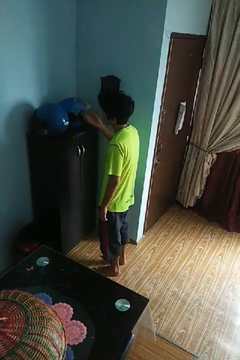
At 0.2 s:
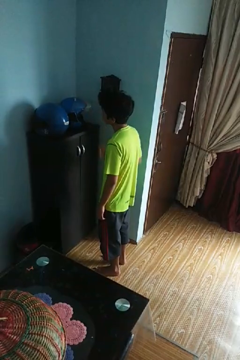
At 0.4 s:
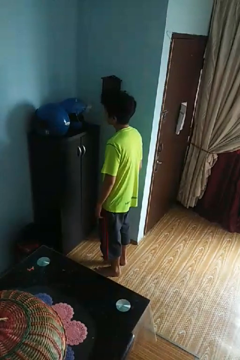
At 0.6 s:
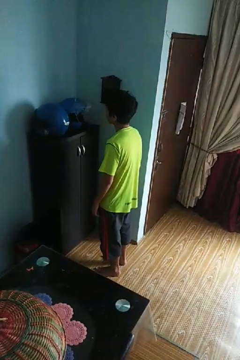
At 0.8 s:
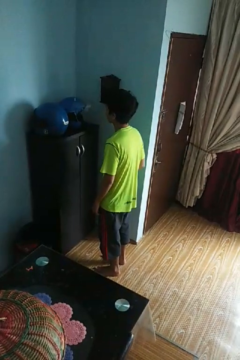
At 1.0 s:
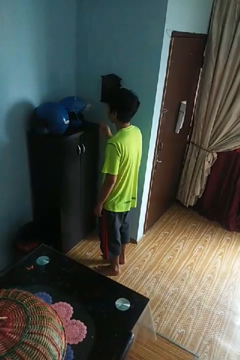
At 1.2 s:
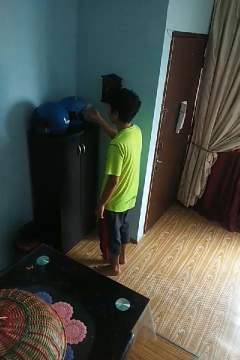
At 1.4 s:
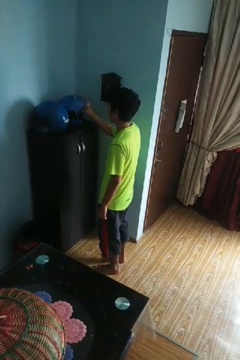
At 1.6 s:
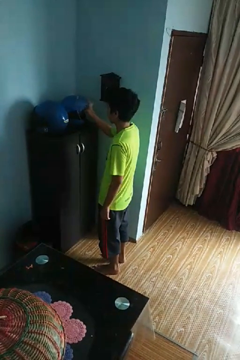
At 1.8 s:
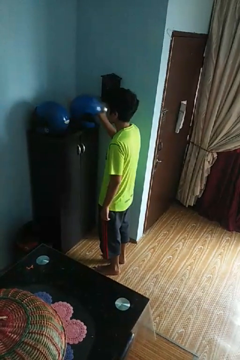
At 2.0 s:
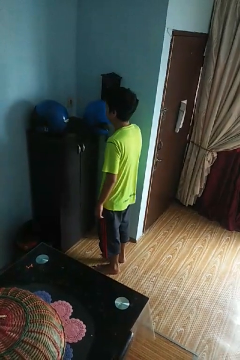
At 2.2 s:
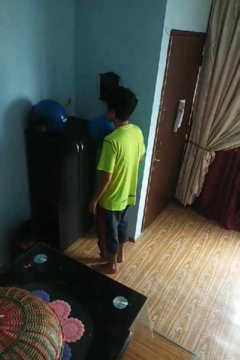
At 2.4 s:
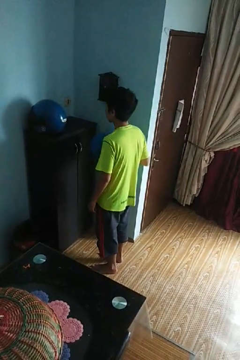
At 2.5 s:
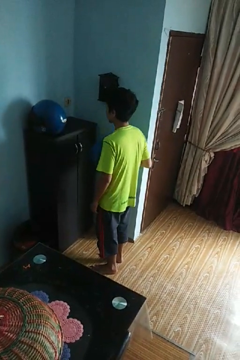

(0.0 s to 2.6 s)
person picks up object from countertop

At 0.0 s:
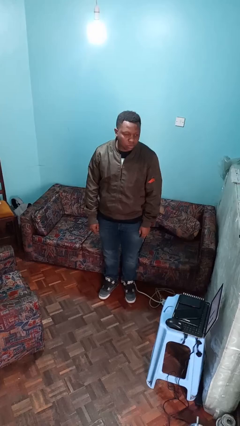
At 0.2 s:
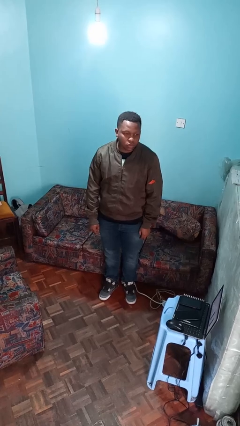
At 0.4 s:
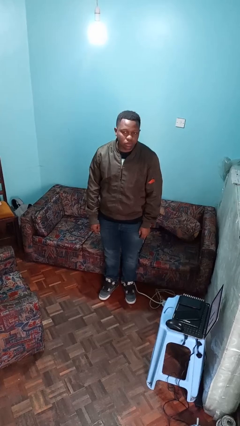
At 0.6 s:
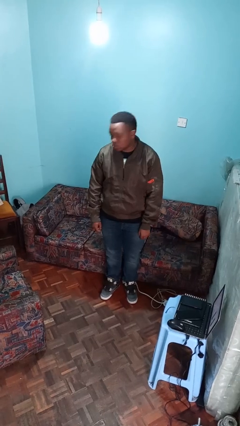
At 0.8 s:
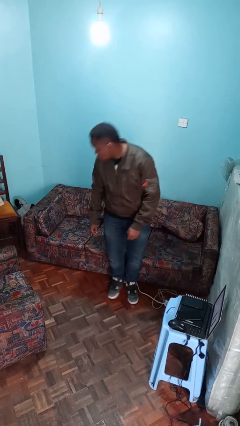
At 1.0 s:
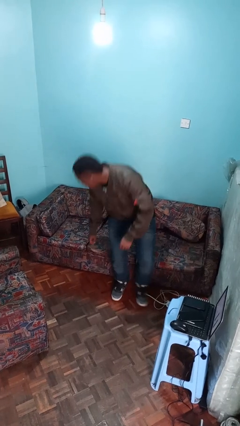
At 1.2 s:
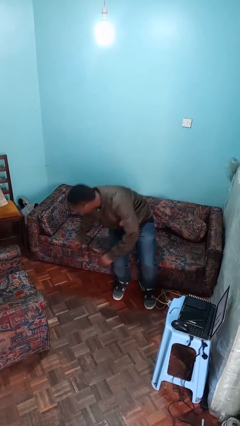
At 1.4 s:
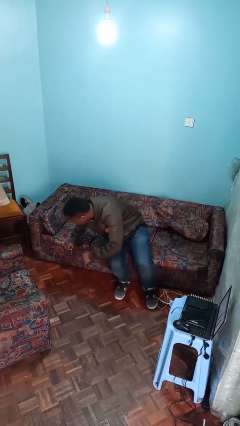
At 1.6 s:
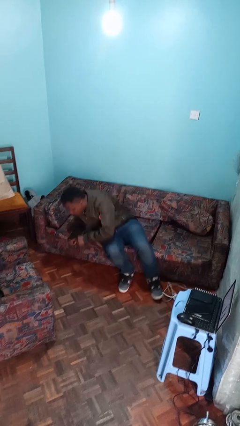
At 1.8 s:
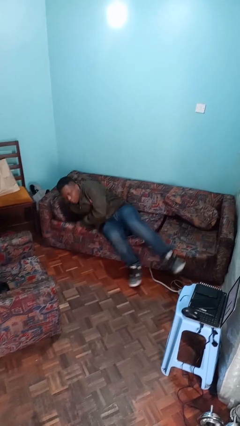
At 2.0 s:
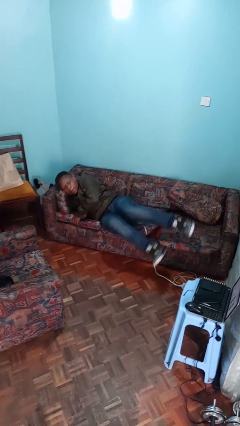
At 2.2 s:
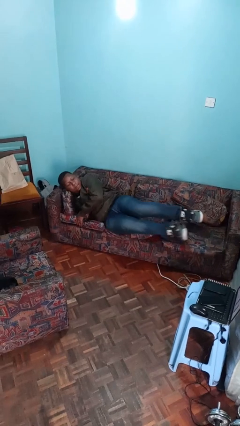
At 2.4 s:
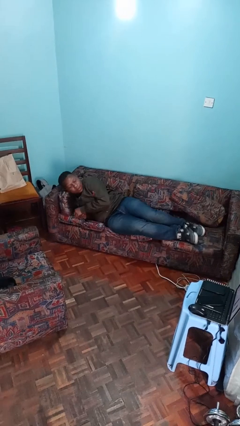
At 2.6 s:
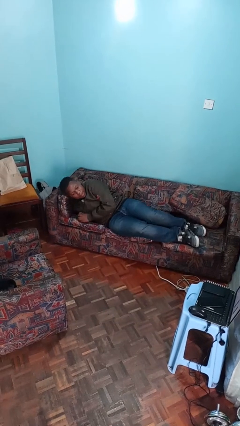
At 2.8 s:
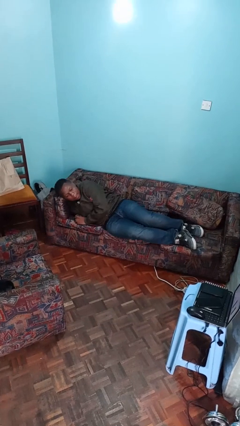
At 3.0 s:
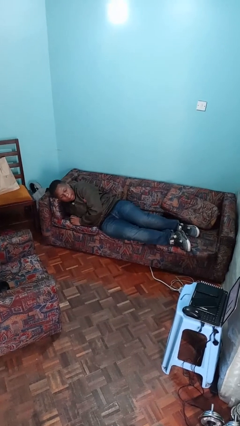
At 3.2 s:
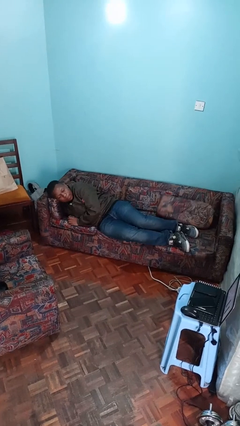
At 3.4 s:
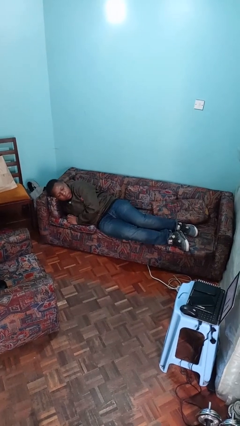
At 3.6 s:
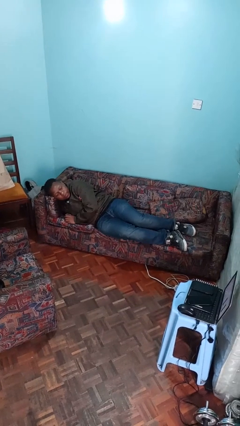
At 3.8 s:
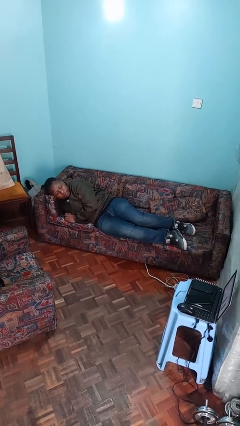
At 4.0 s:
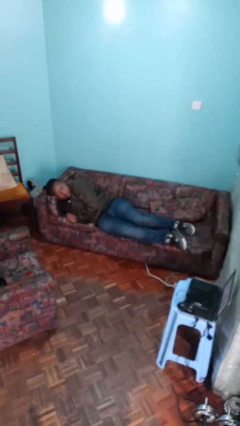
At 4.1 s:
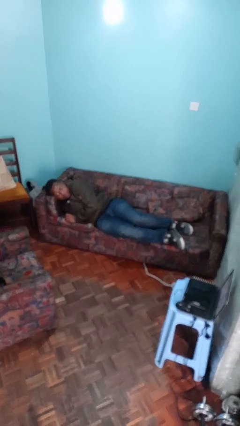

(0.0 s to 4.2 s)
person lies down on couch

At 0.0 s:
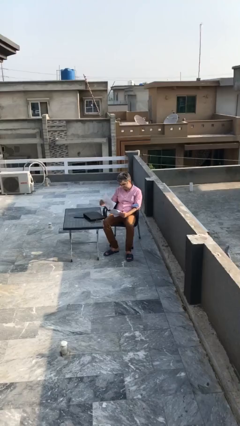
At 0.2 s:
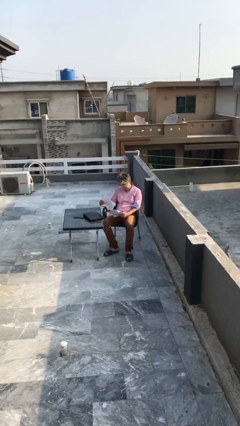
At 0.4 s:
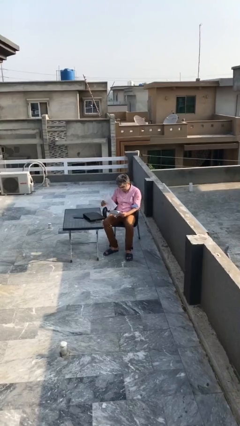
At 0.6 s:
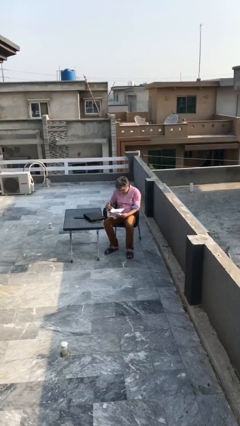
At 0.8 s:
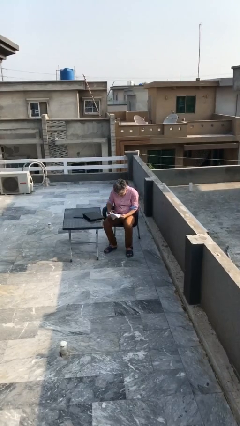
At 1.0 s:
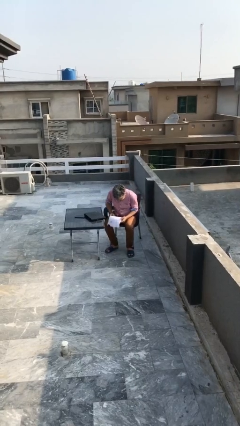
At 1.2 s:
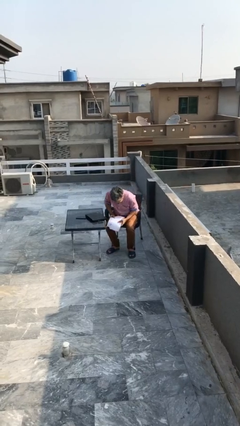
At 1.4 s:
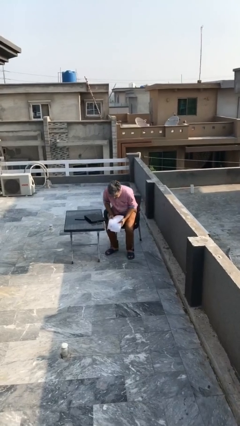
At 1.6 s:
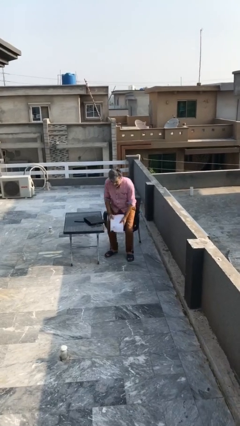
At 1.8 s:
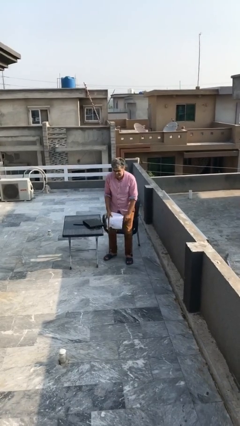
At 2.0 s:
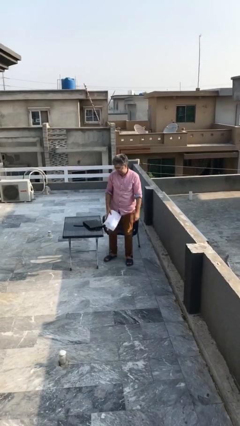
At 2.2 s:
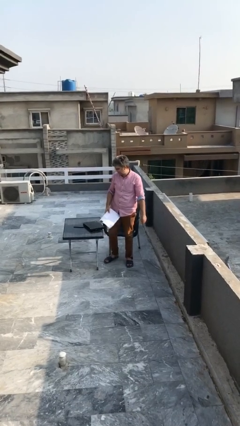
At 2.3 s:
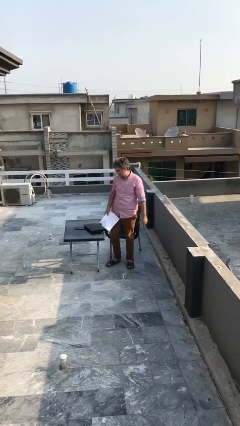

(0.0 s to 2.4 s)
person stands up

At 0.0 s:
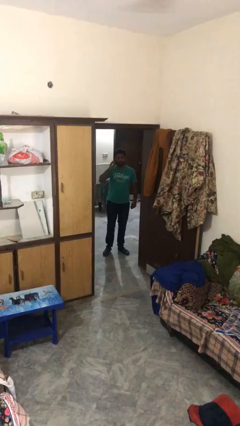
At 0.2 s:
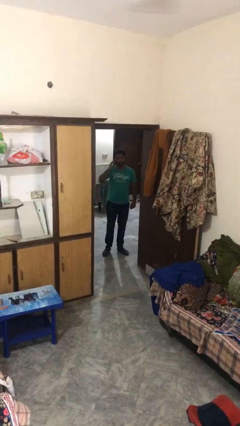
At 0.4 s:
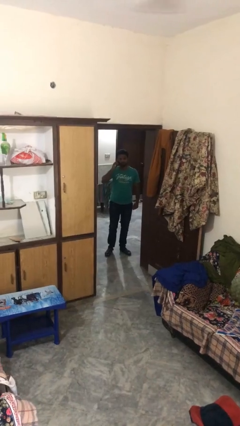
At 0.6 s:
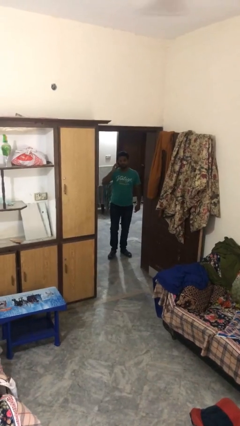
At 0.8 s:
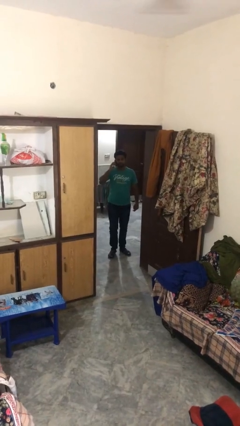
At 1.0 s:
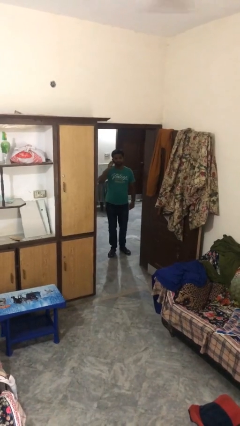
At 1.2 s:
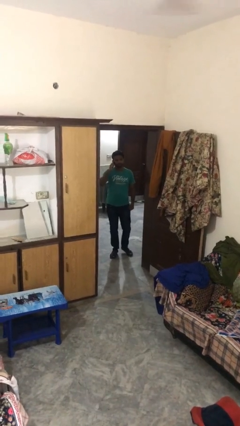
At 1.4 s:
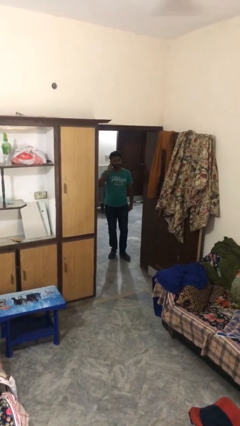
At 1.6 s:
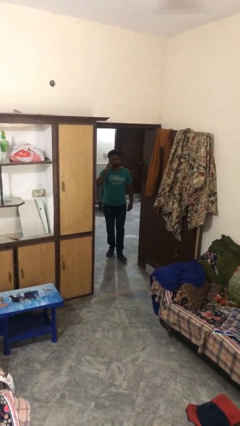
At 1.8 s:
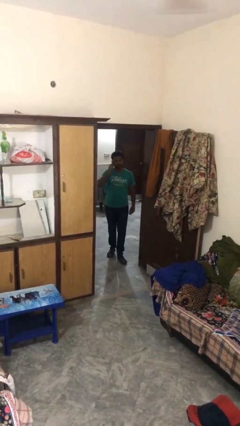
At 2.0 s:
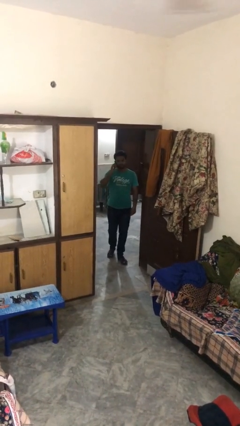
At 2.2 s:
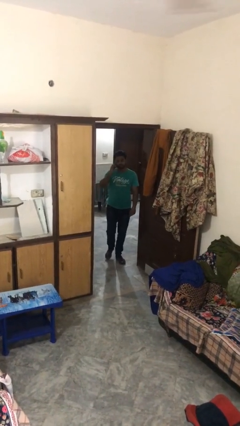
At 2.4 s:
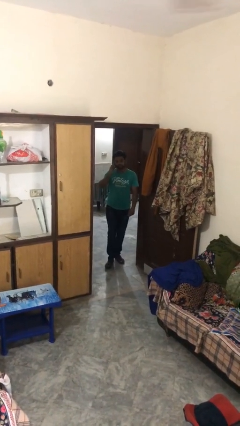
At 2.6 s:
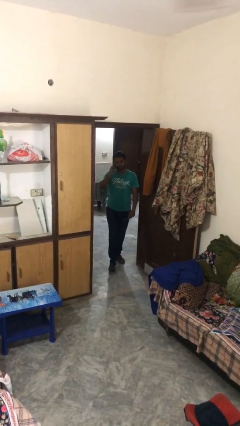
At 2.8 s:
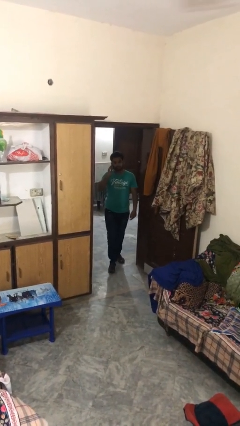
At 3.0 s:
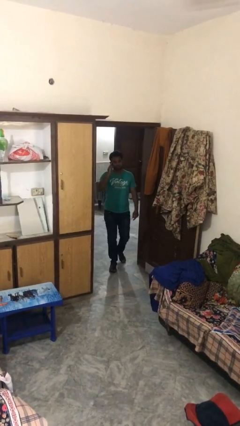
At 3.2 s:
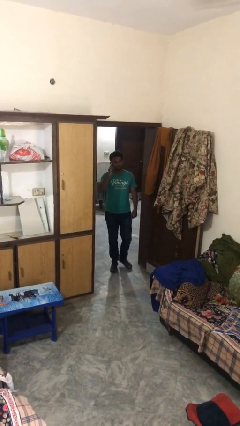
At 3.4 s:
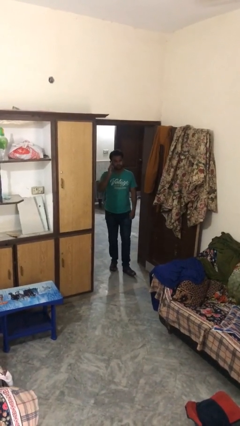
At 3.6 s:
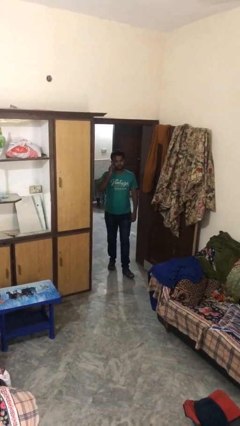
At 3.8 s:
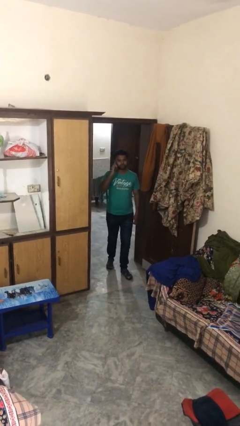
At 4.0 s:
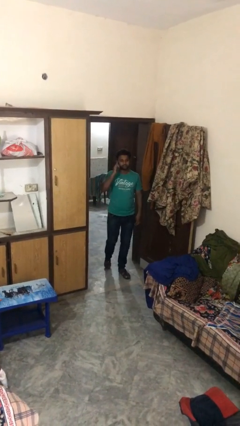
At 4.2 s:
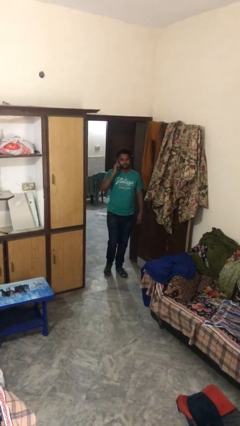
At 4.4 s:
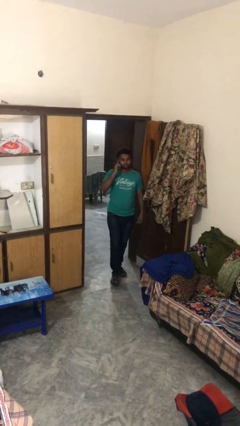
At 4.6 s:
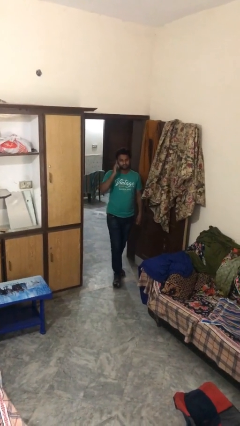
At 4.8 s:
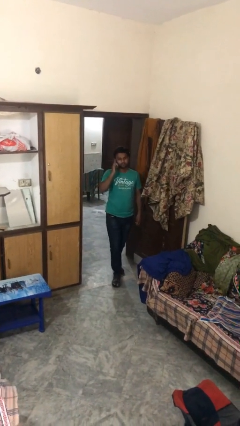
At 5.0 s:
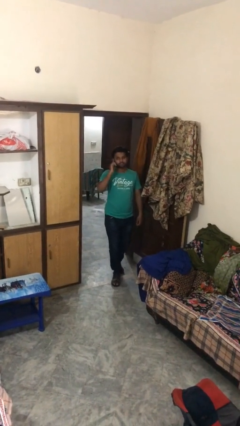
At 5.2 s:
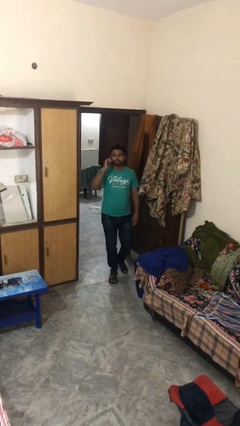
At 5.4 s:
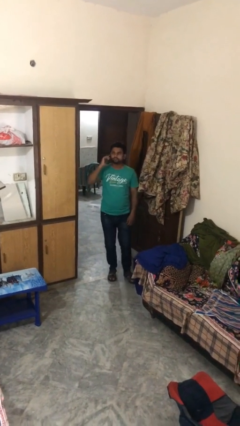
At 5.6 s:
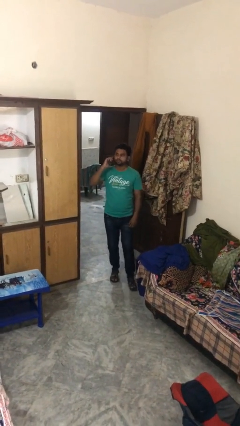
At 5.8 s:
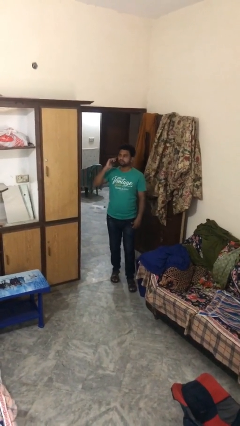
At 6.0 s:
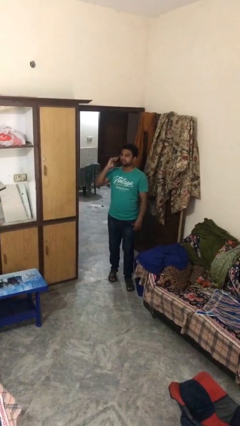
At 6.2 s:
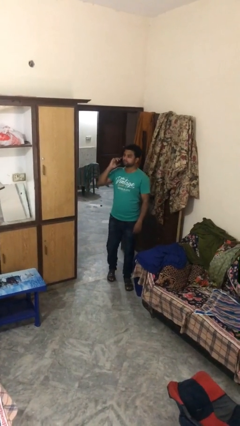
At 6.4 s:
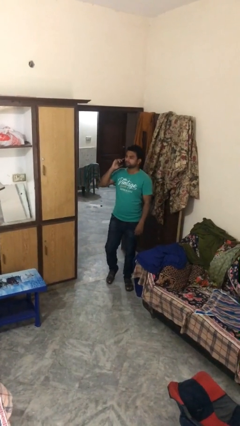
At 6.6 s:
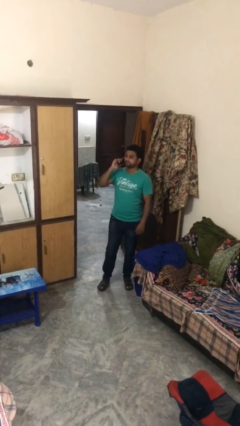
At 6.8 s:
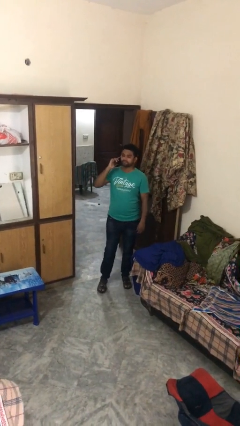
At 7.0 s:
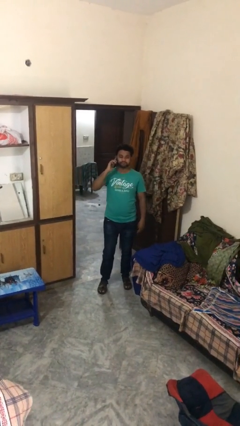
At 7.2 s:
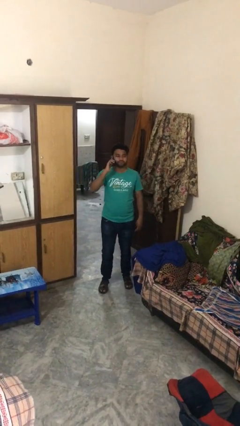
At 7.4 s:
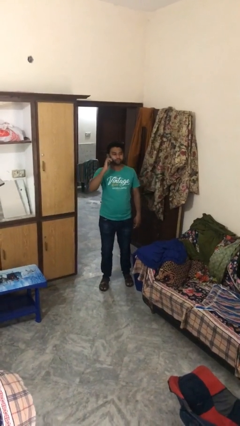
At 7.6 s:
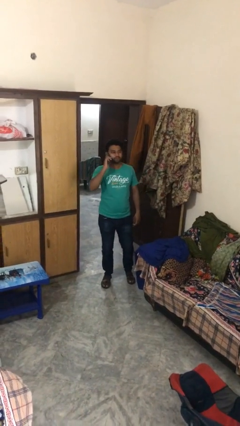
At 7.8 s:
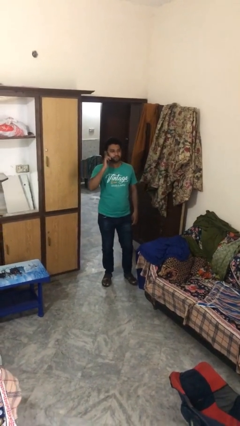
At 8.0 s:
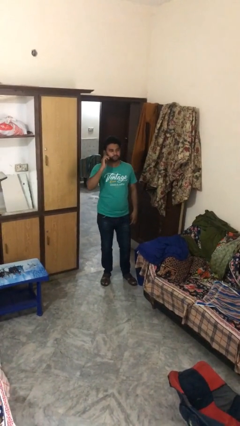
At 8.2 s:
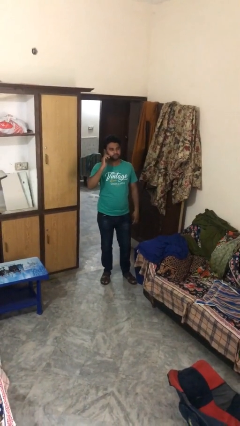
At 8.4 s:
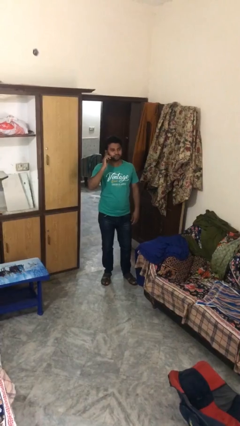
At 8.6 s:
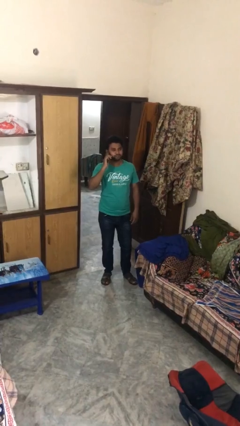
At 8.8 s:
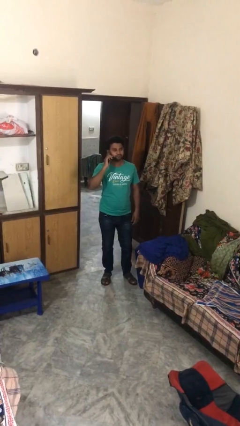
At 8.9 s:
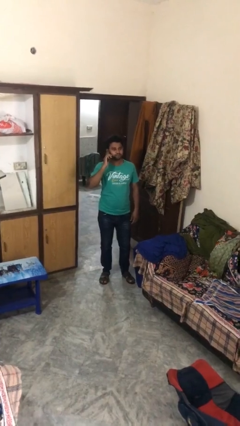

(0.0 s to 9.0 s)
person enters scene through structure

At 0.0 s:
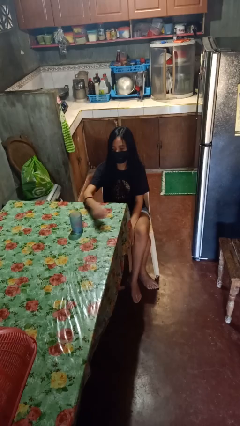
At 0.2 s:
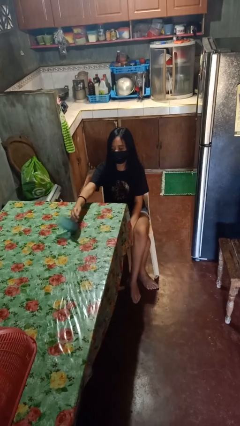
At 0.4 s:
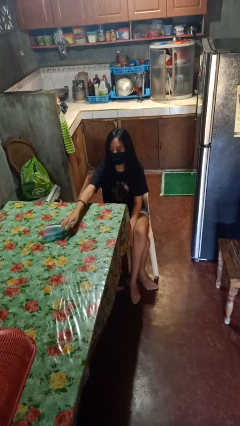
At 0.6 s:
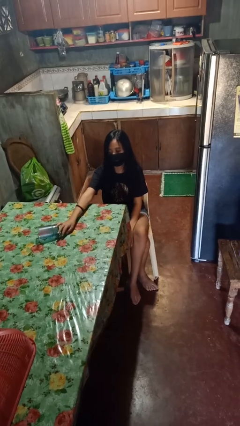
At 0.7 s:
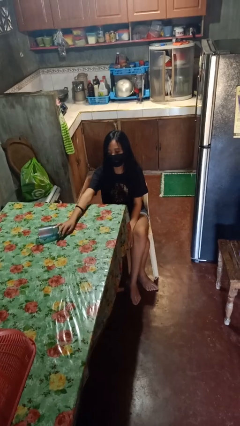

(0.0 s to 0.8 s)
person knocks over glass
